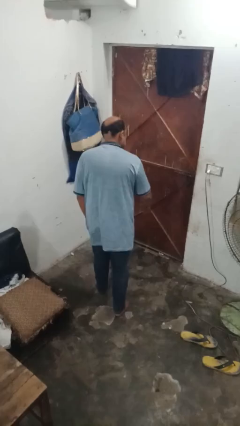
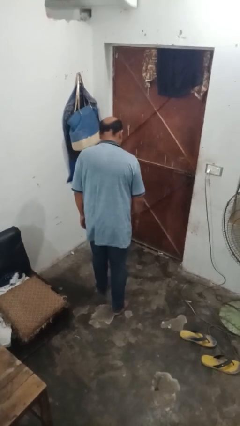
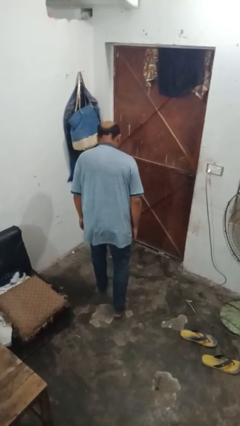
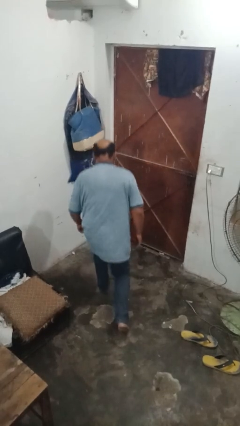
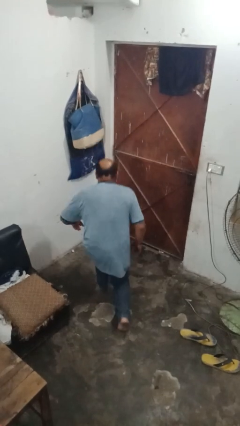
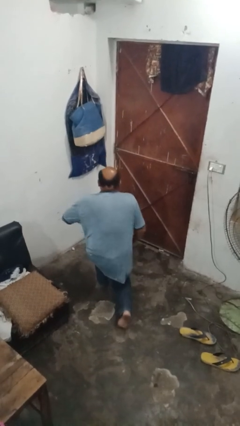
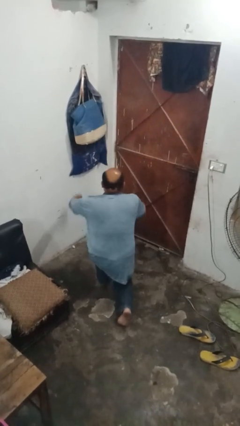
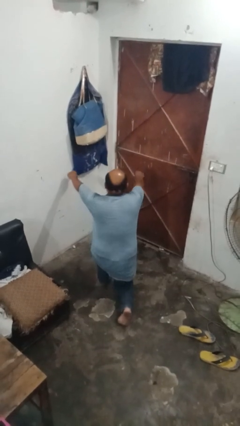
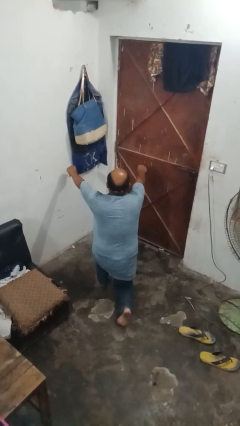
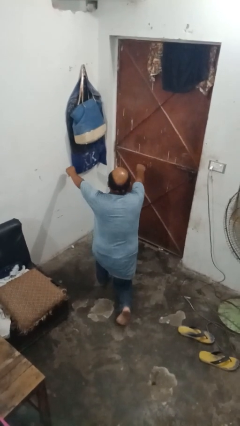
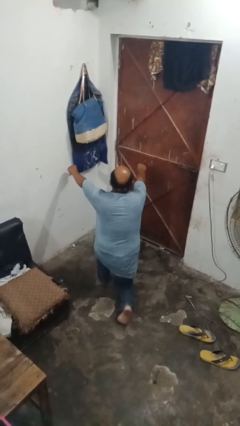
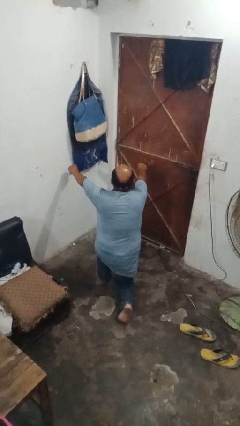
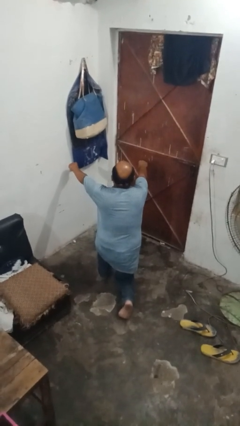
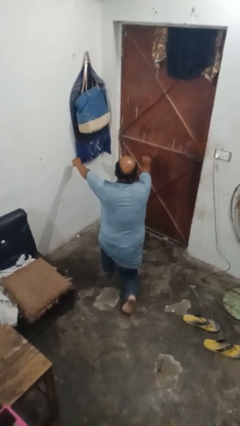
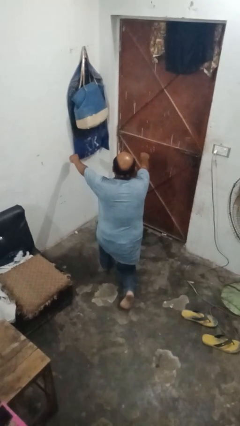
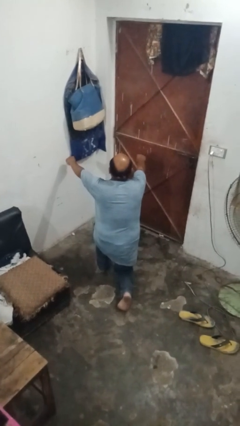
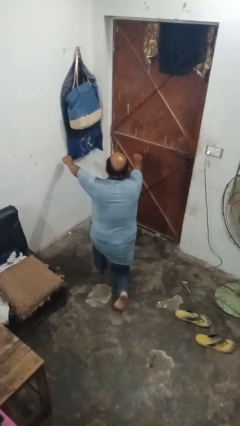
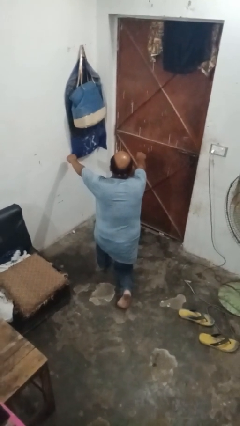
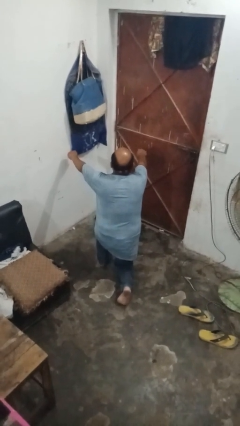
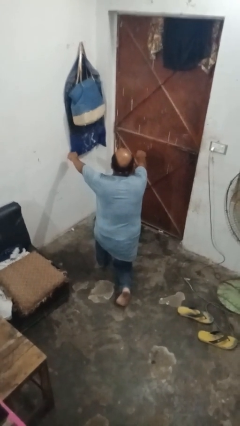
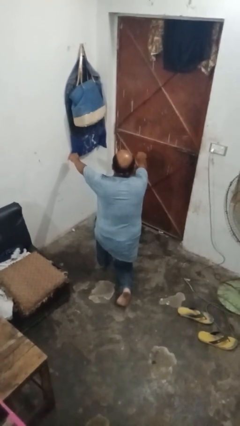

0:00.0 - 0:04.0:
person eats snack from bag

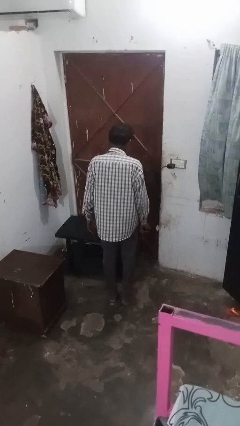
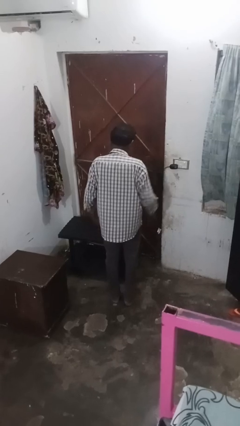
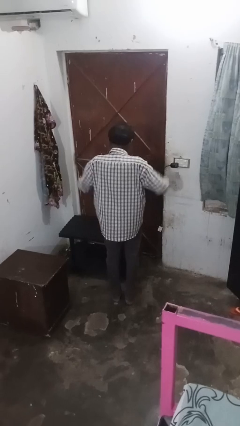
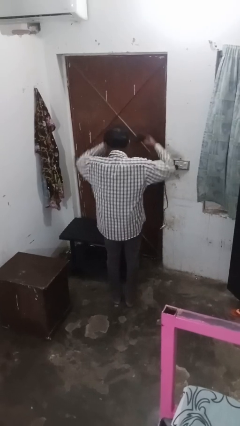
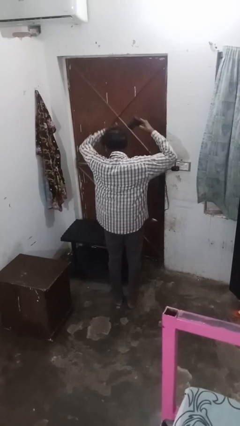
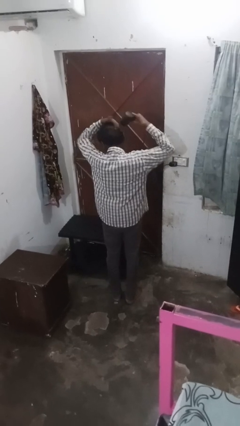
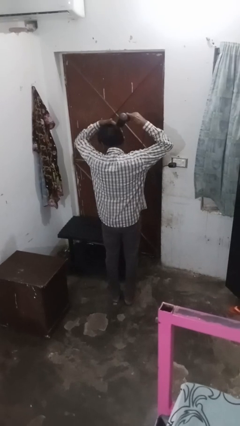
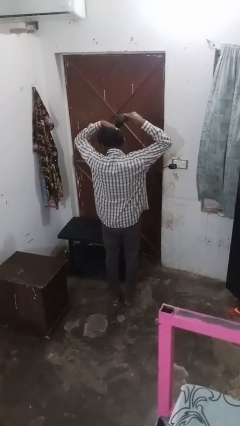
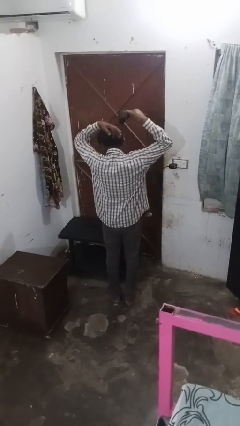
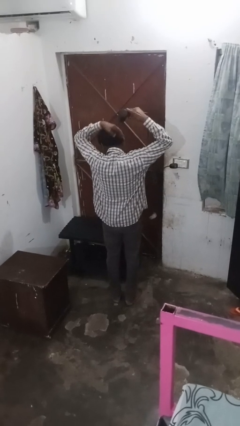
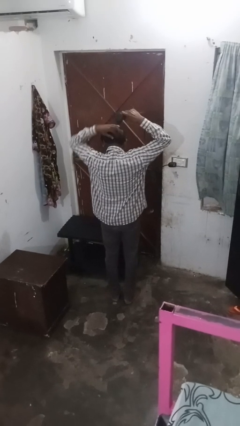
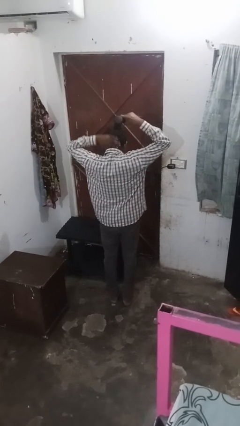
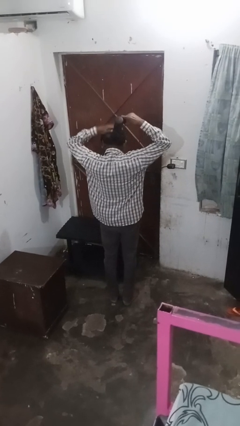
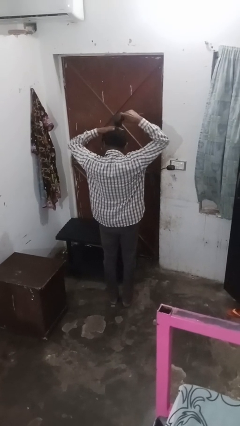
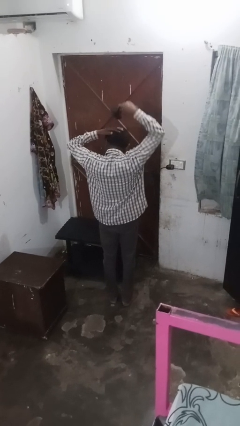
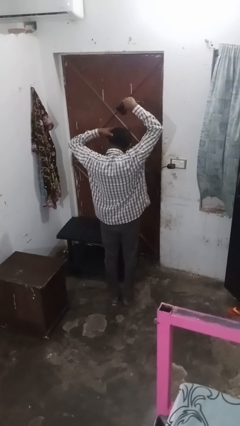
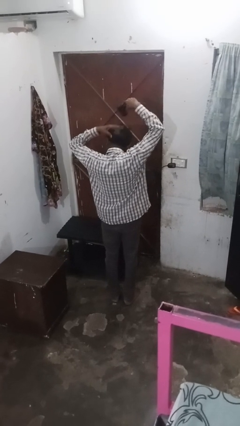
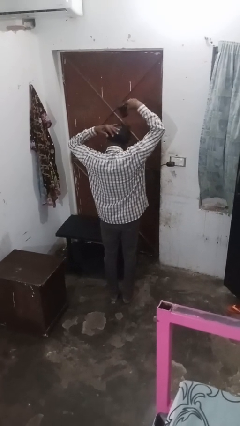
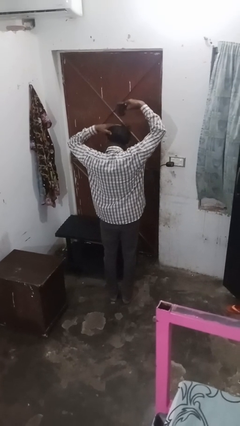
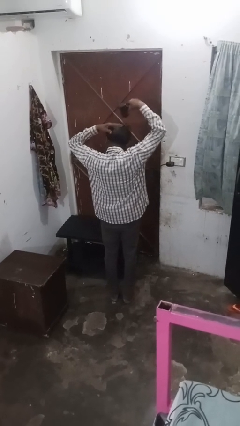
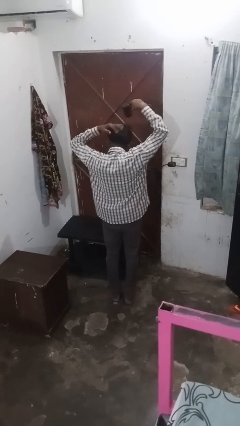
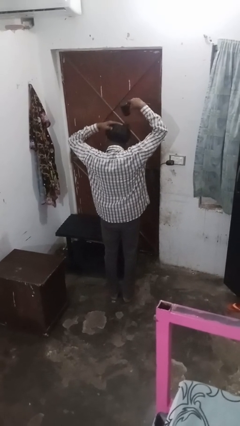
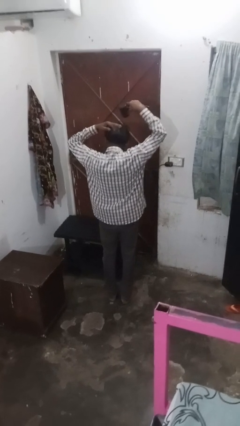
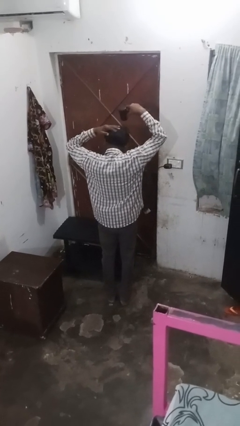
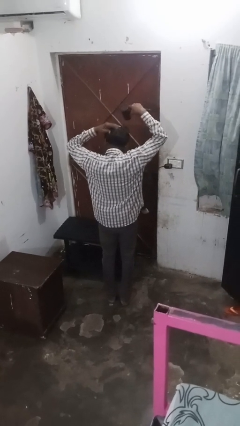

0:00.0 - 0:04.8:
person dries hair with hairdryer

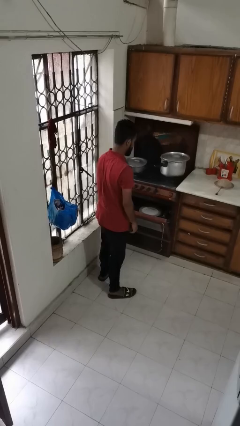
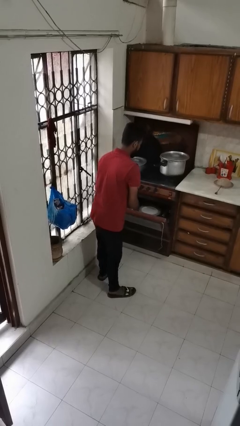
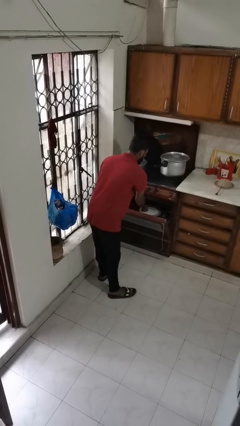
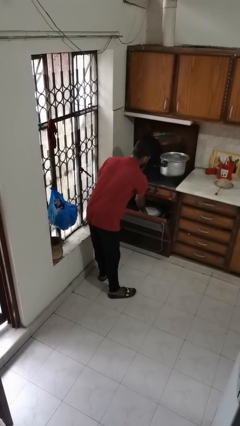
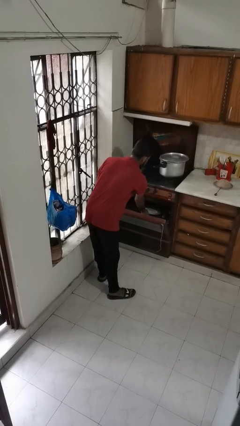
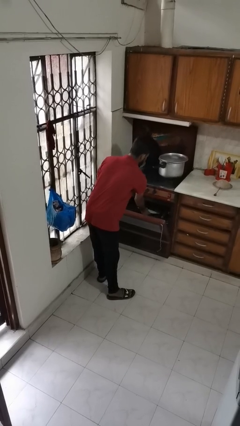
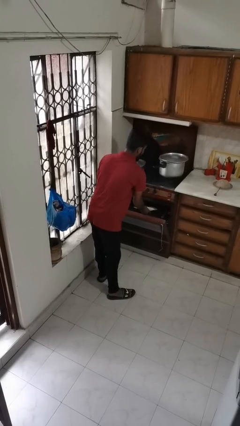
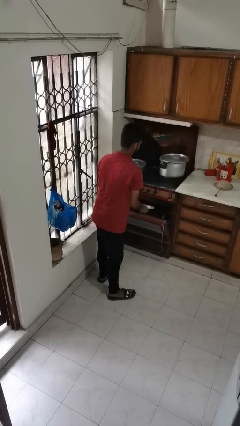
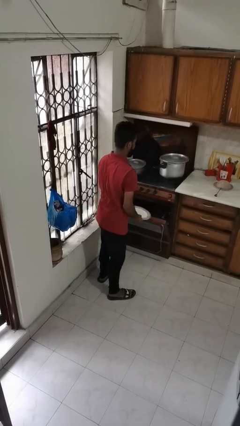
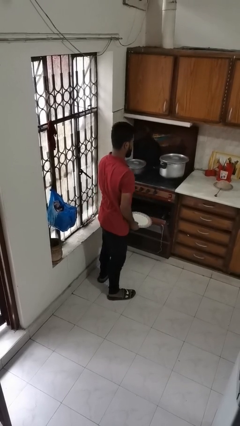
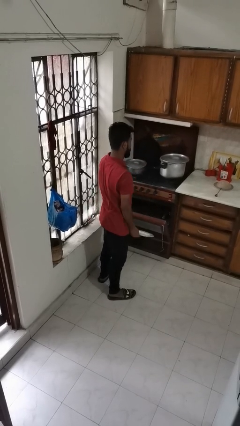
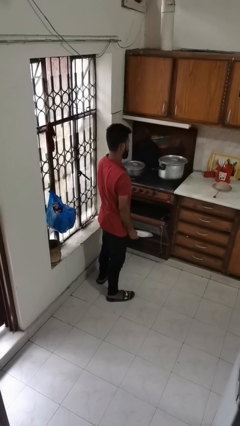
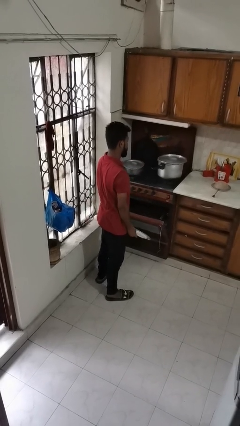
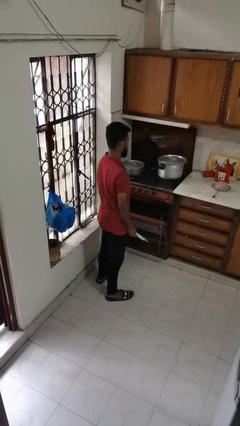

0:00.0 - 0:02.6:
person takes object from oven

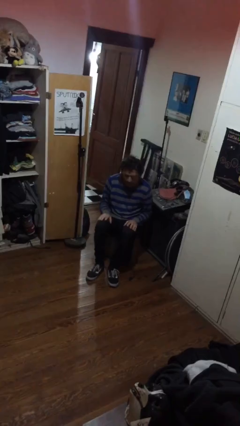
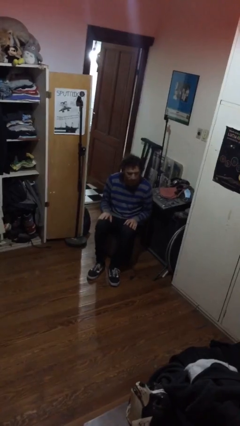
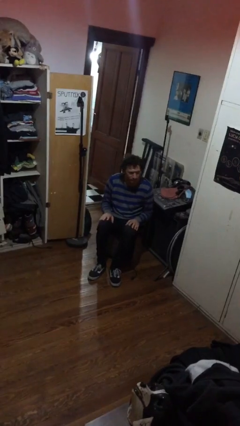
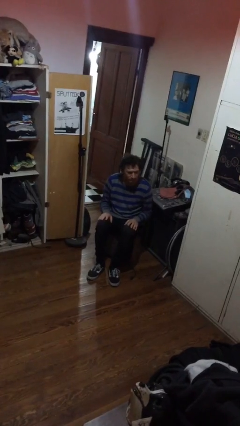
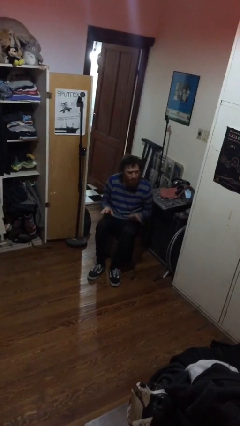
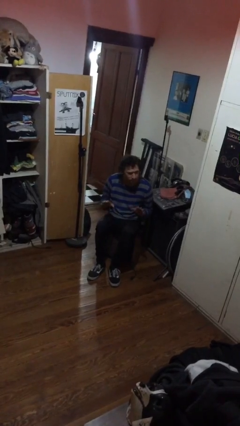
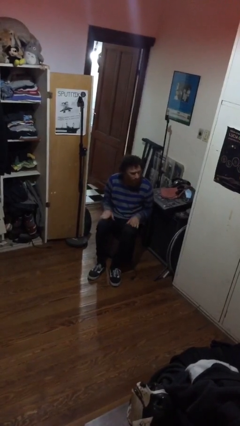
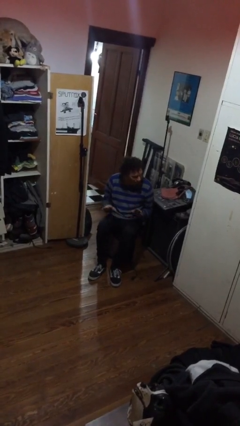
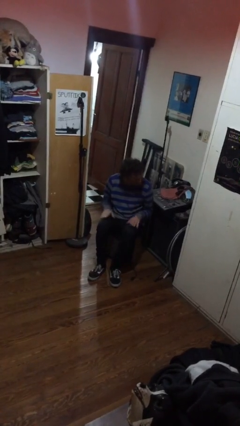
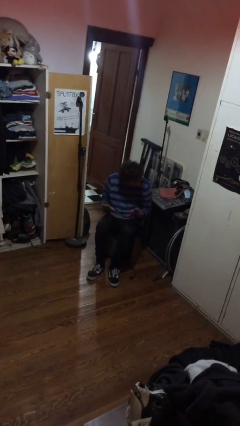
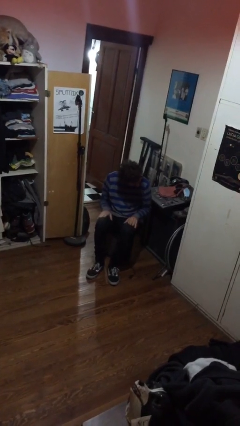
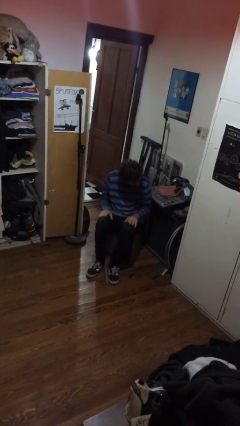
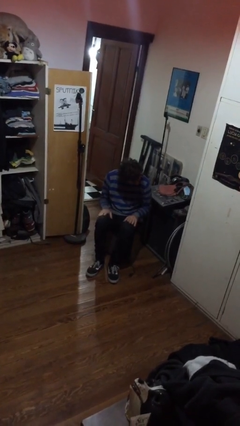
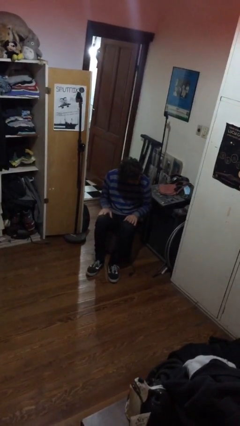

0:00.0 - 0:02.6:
person slaps hands on thighs

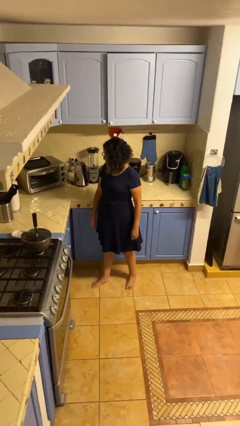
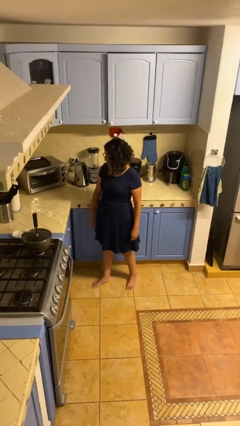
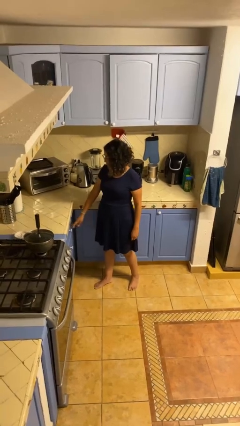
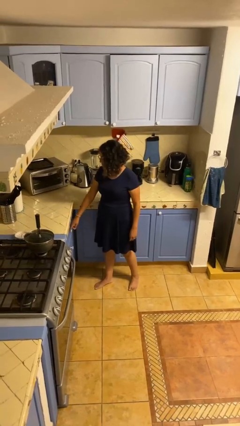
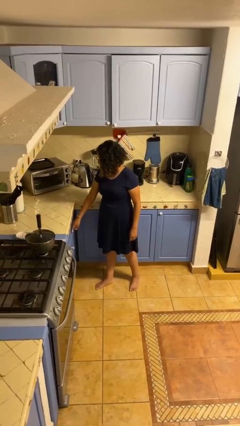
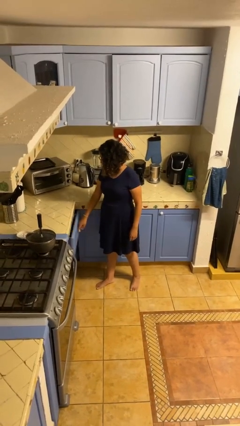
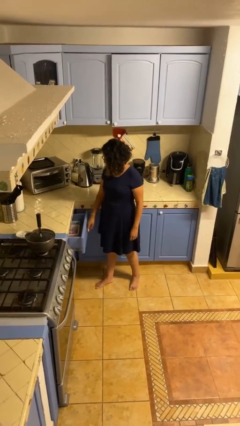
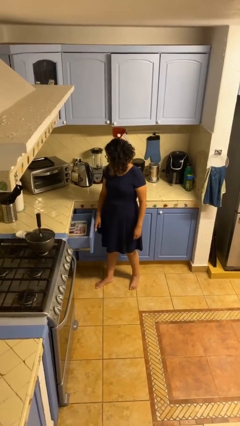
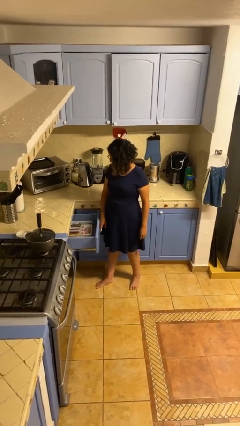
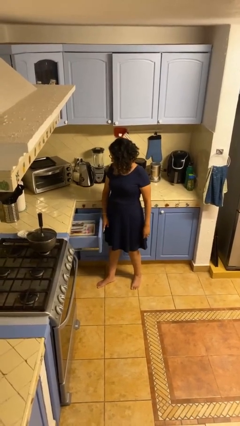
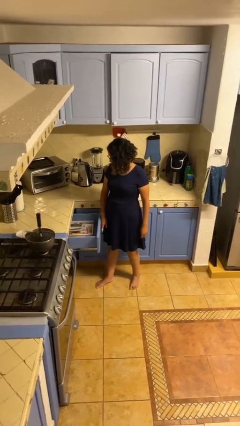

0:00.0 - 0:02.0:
person opens kitchen drawer

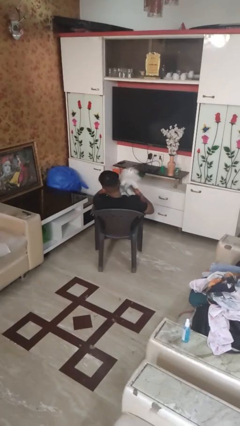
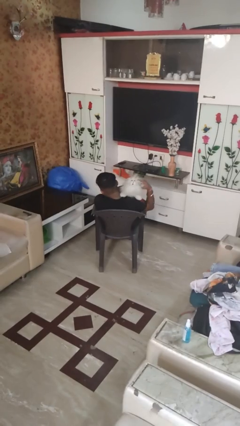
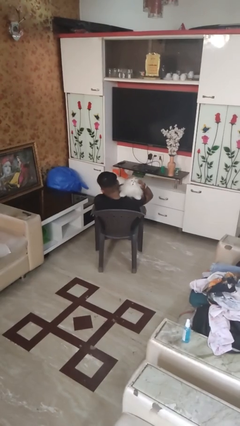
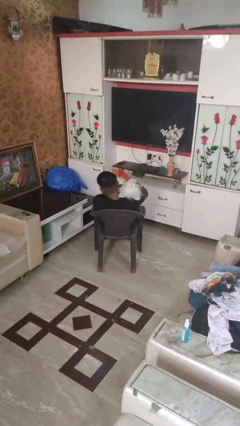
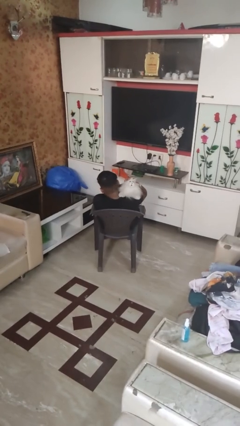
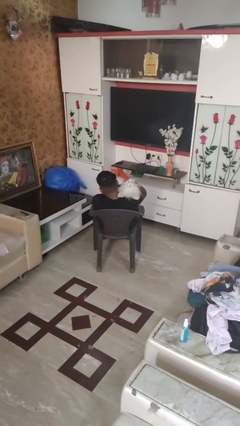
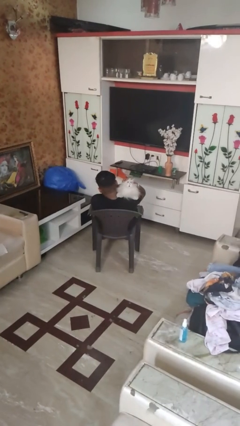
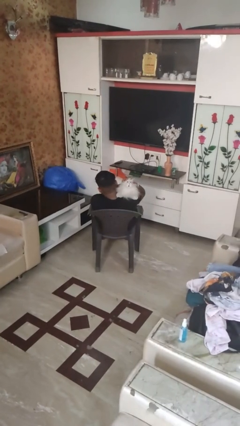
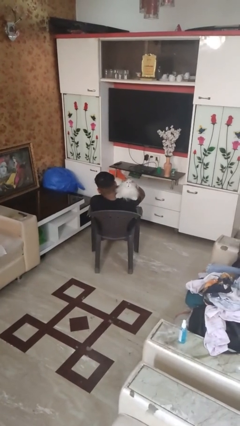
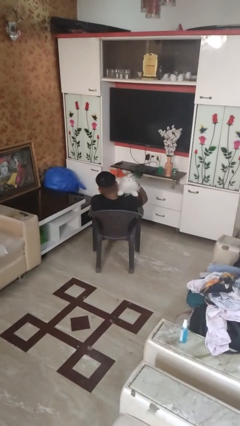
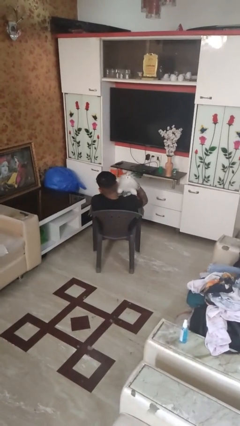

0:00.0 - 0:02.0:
person hugs stuffed animal
